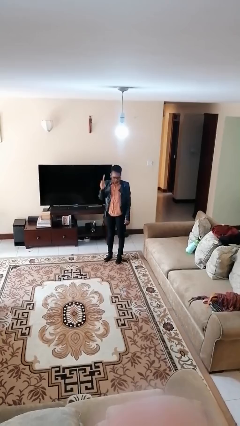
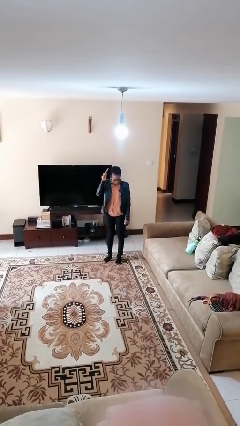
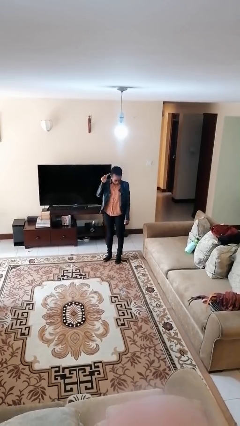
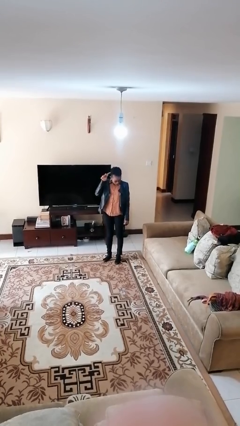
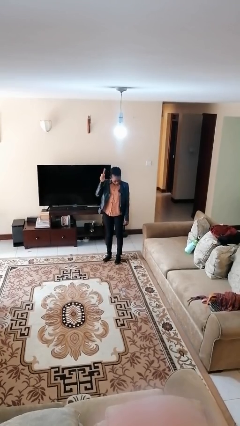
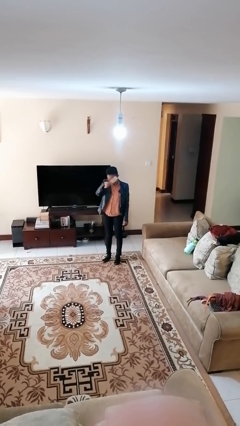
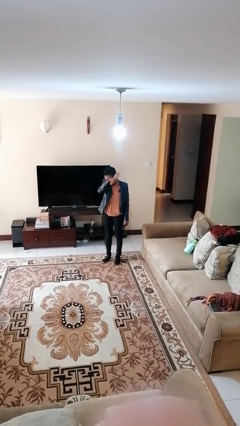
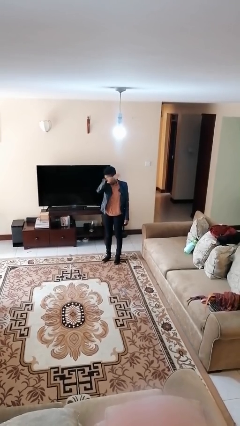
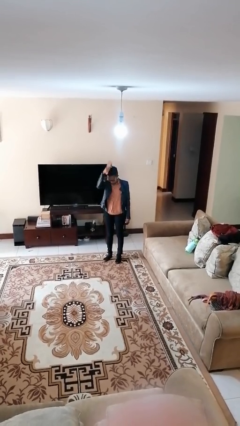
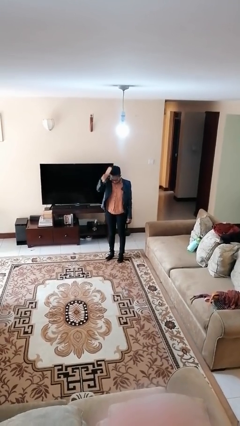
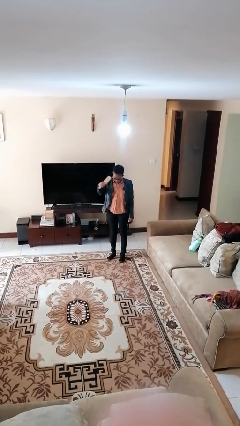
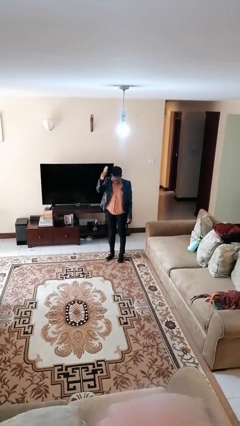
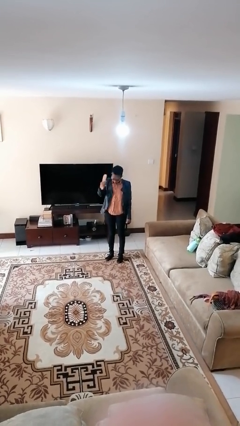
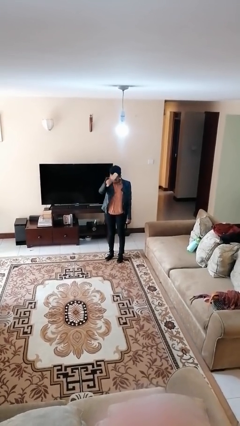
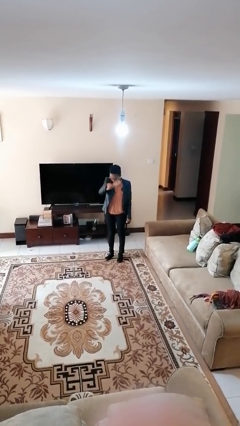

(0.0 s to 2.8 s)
person brushes hair

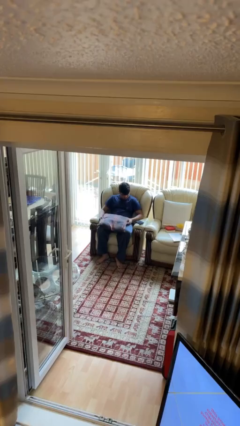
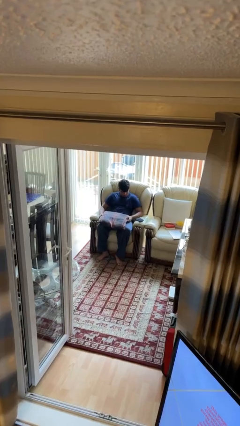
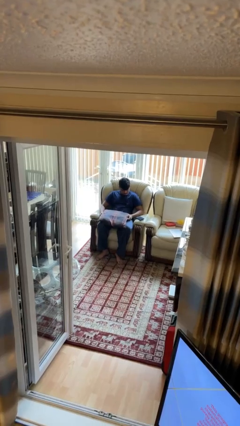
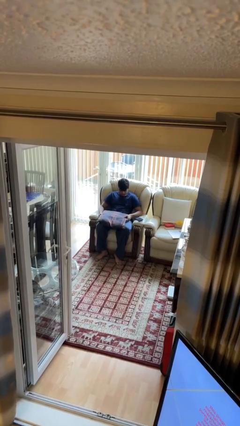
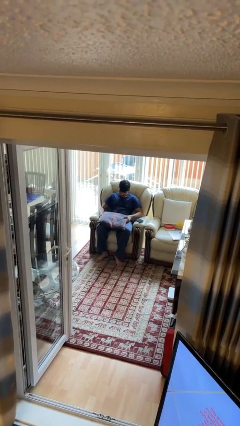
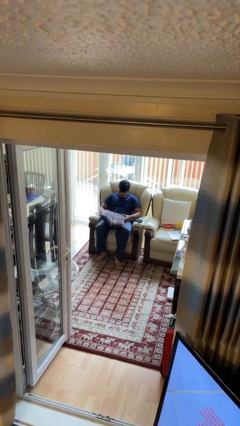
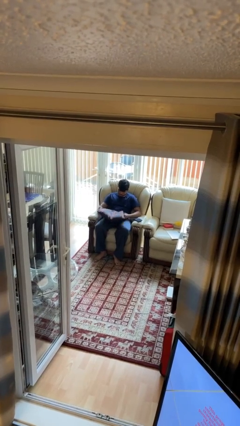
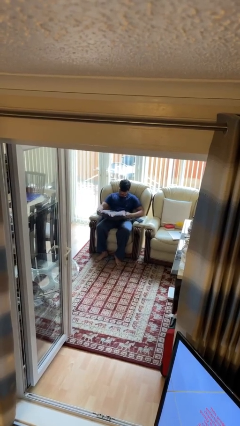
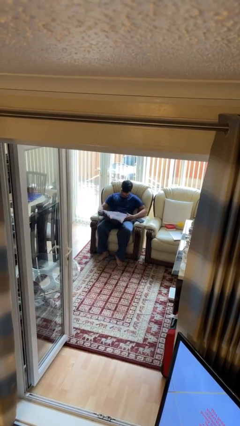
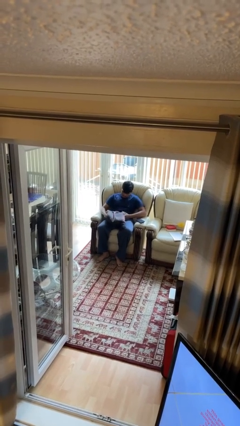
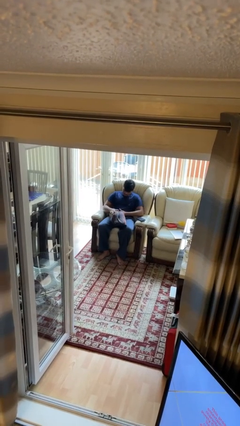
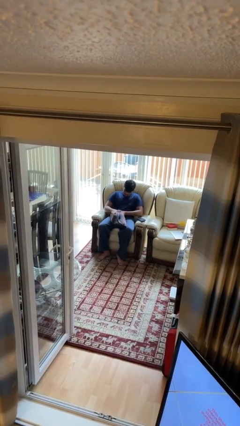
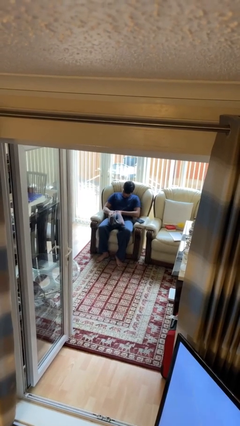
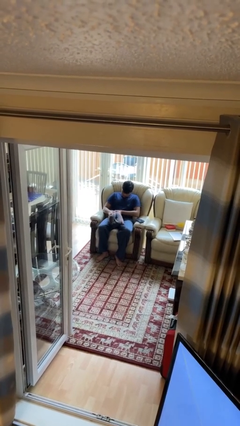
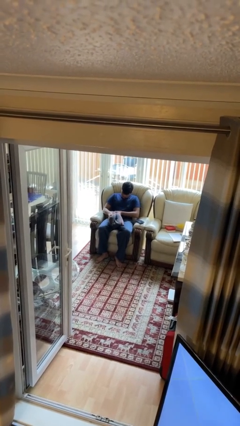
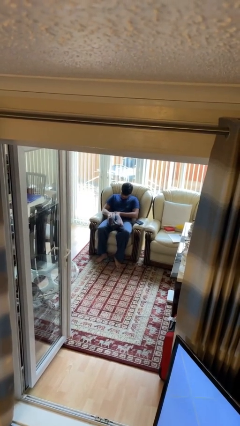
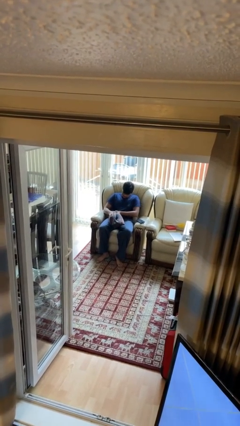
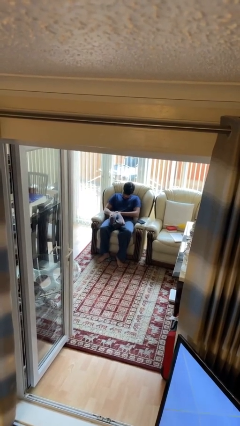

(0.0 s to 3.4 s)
person squeezes object

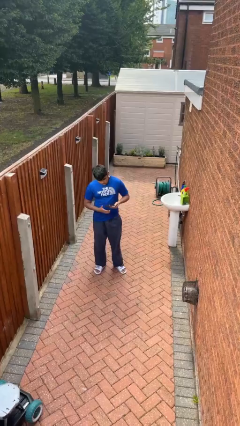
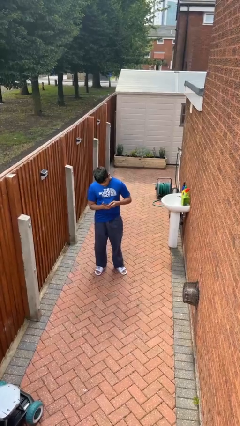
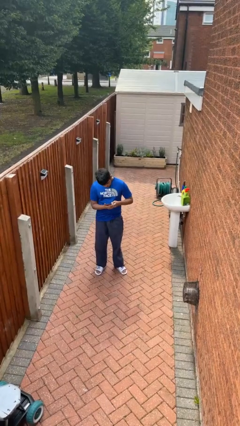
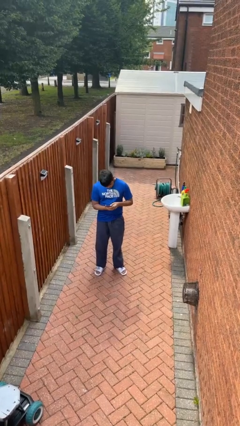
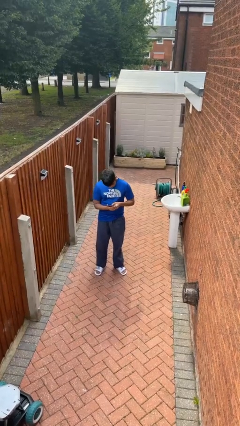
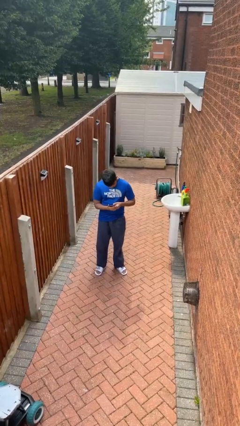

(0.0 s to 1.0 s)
person takes phone from pocket

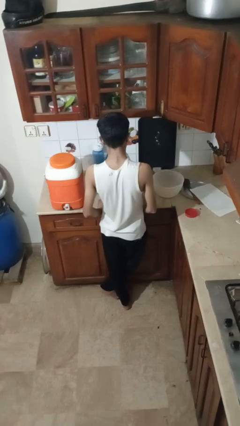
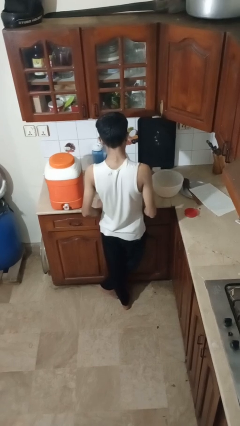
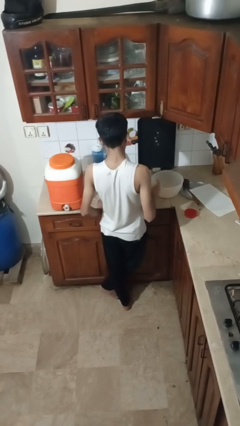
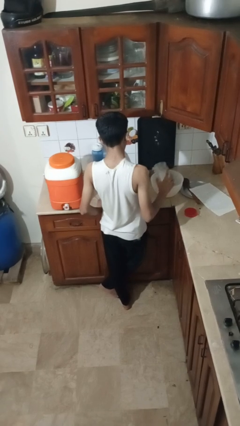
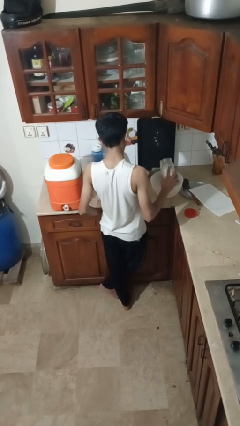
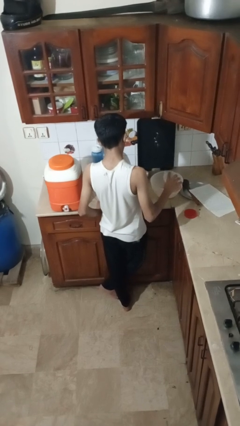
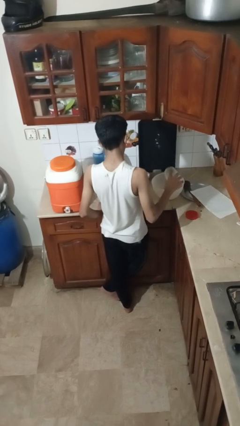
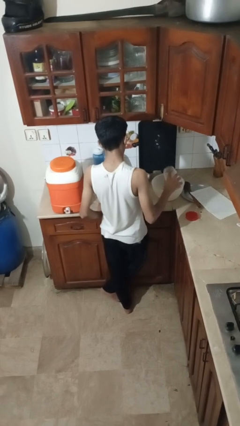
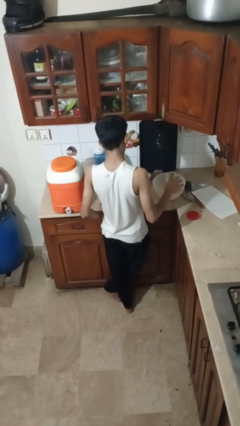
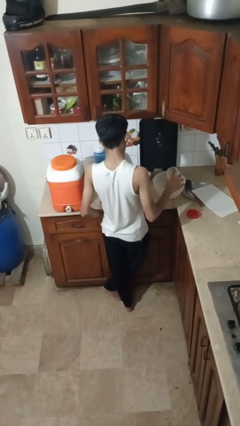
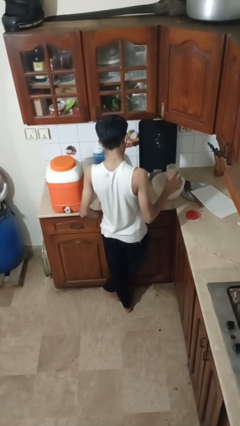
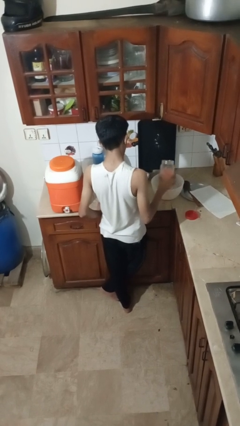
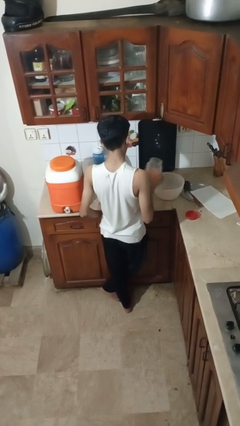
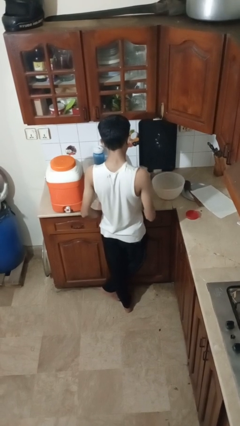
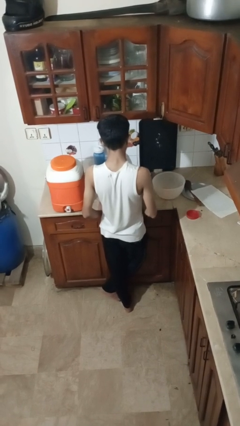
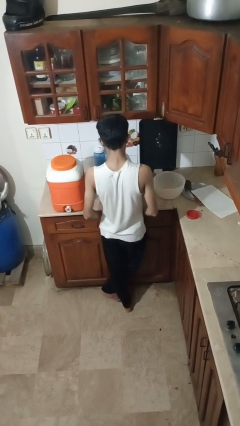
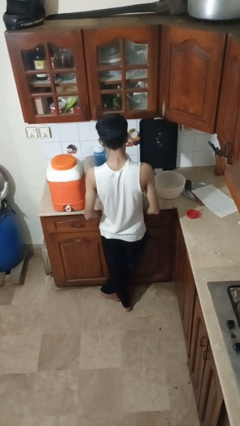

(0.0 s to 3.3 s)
person pours into bowl

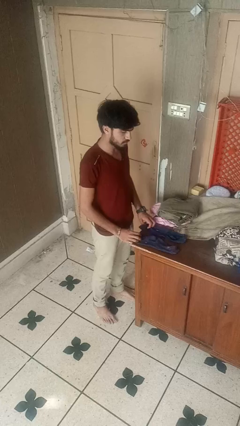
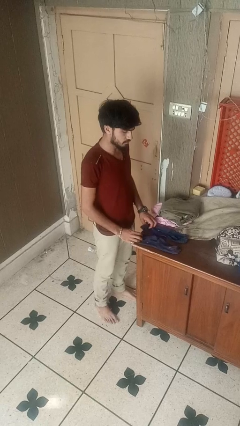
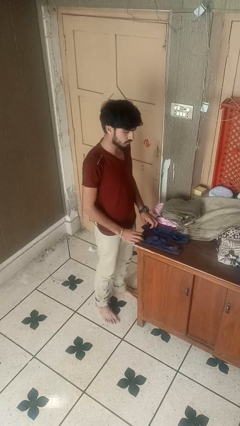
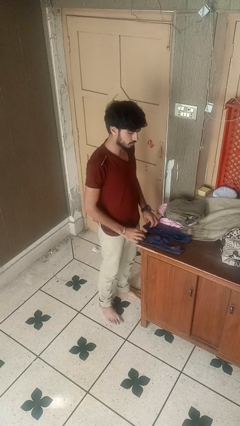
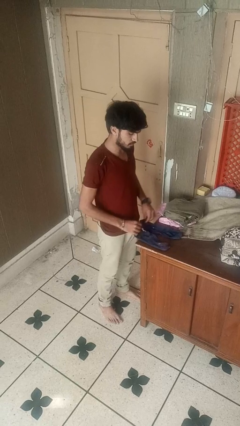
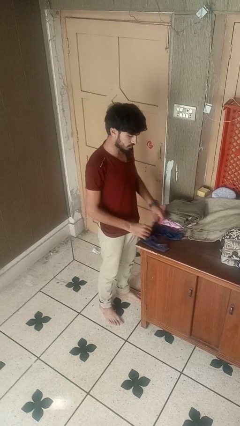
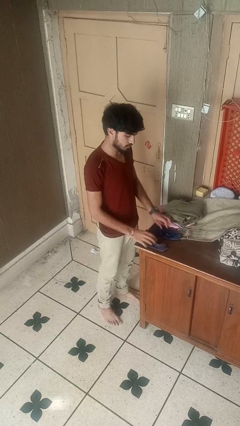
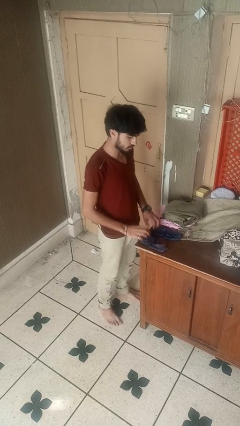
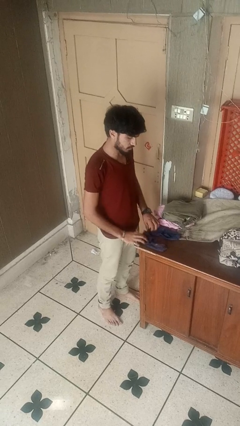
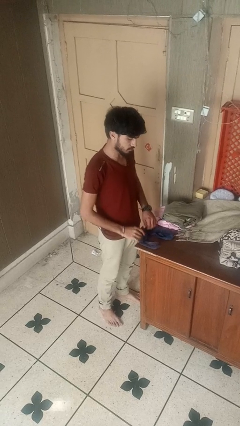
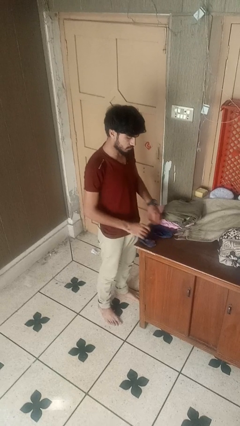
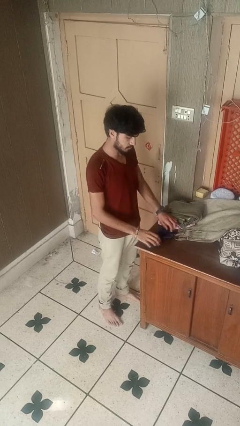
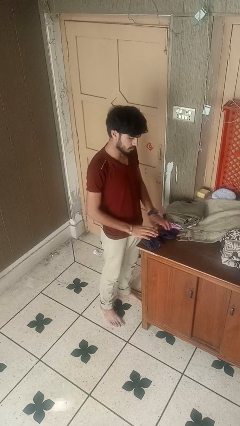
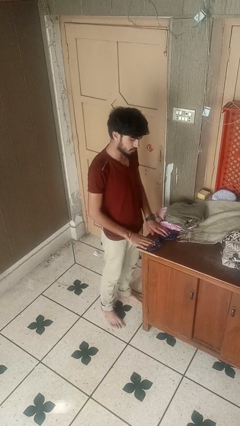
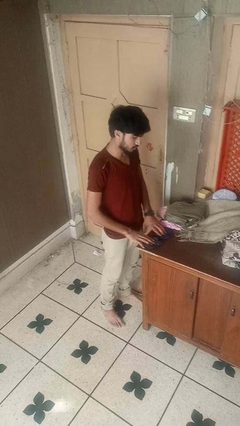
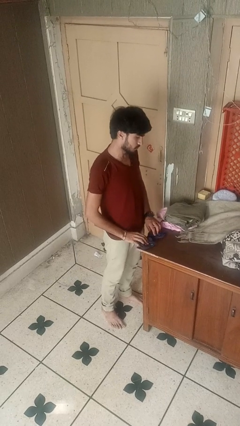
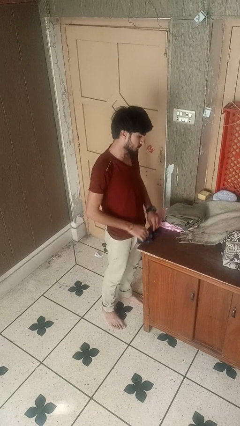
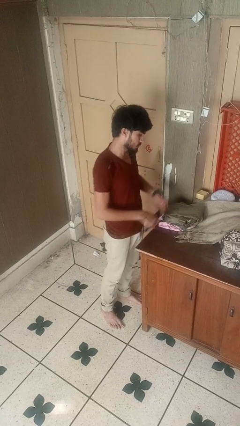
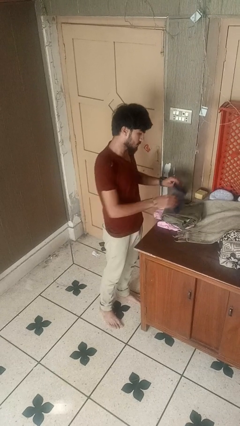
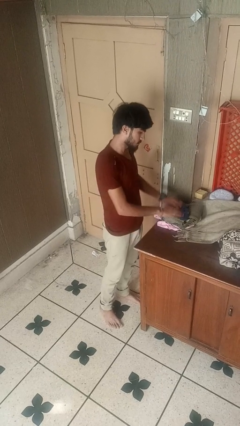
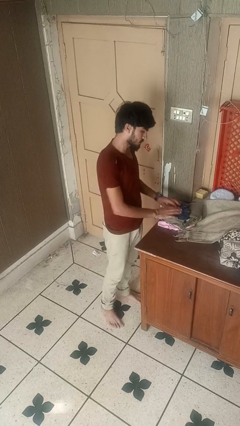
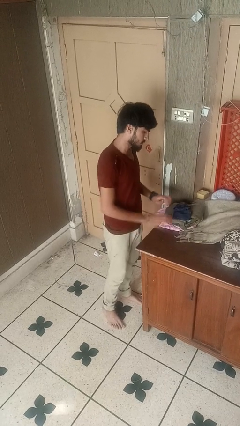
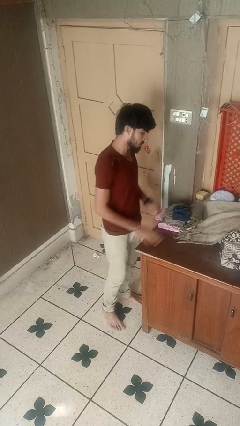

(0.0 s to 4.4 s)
person folds socks

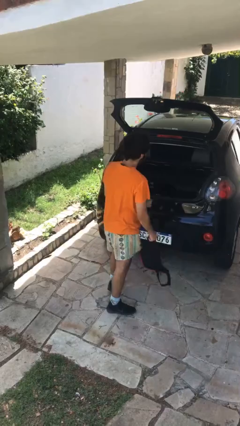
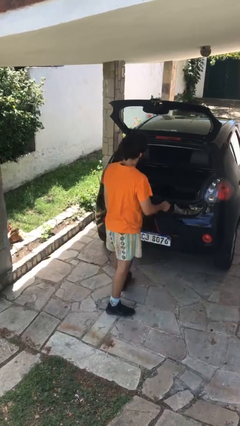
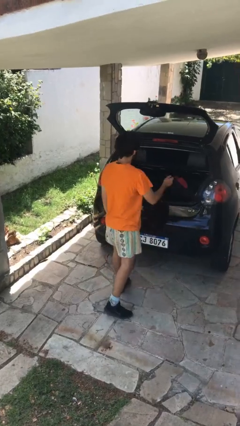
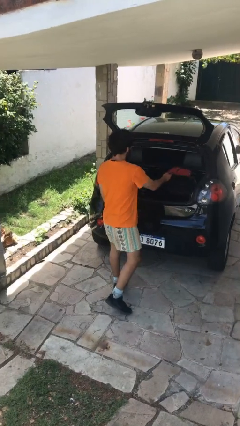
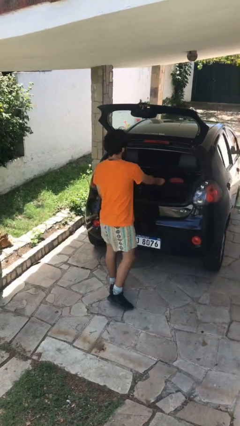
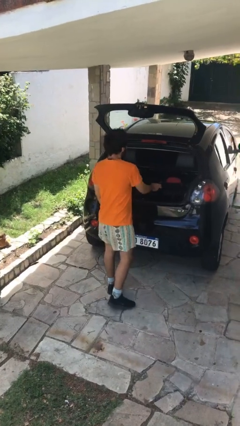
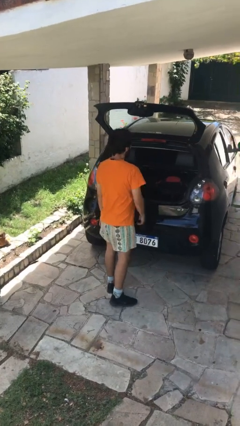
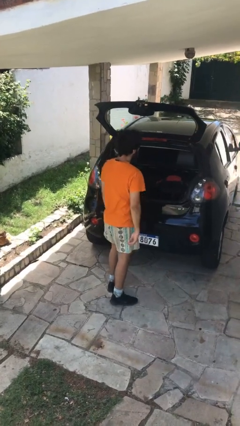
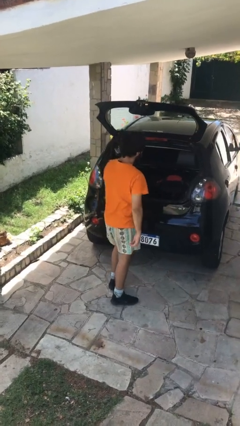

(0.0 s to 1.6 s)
person loads car

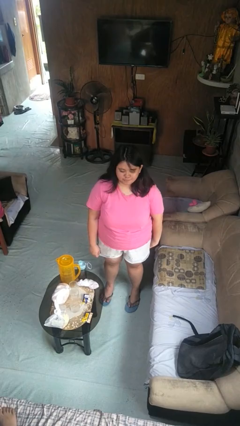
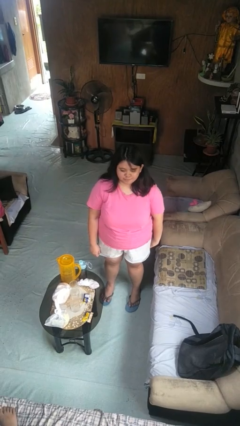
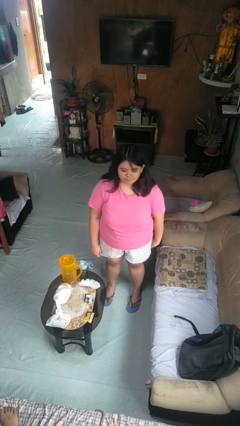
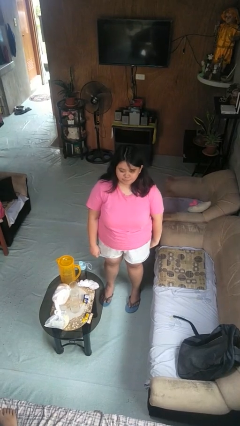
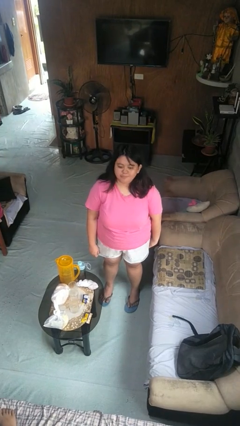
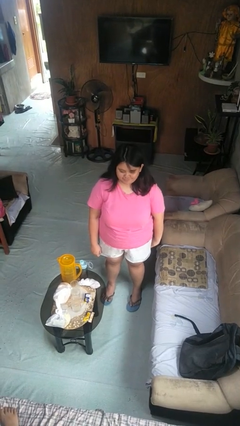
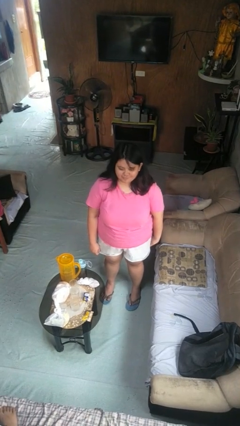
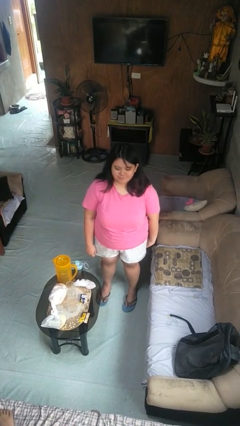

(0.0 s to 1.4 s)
person nods head
